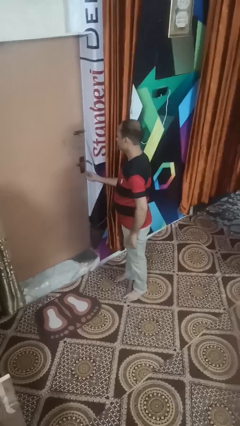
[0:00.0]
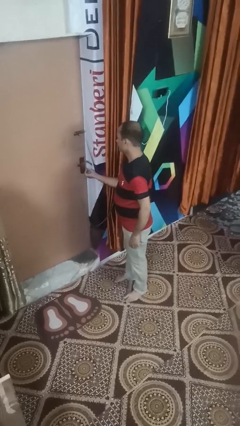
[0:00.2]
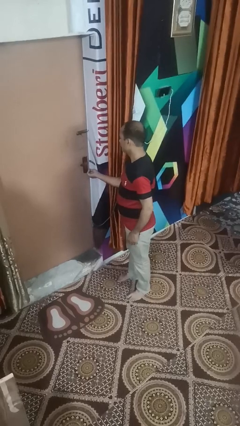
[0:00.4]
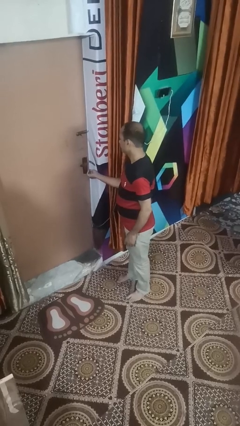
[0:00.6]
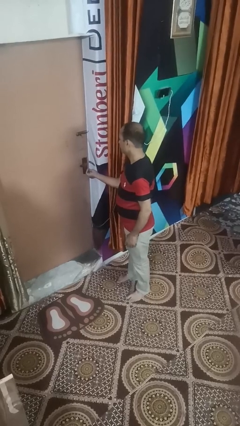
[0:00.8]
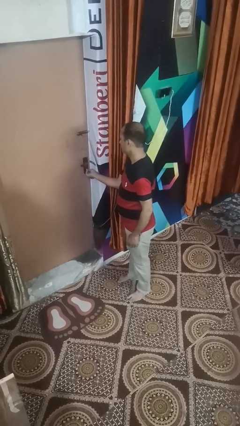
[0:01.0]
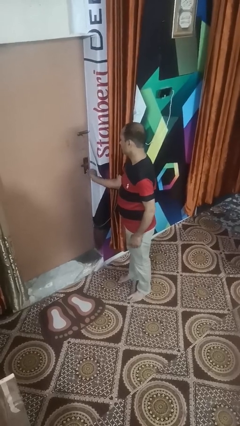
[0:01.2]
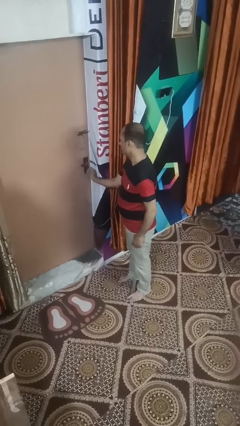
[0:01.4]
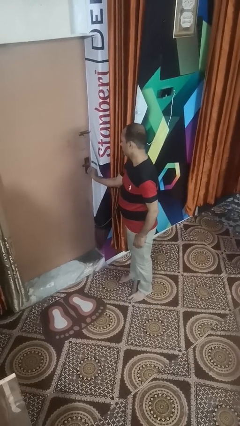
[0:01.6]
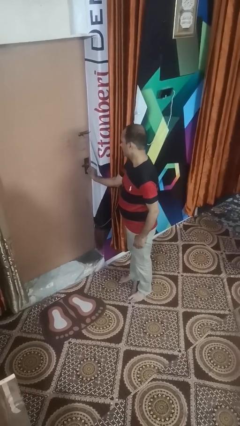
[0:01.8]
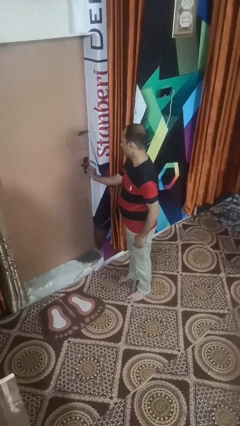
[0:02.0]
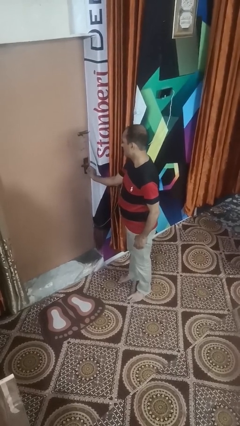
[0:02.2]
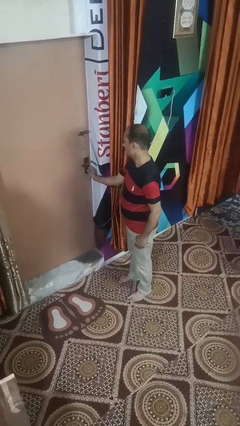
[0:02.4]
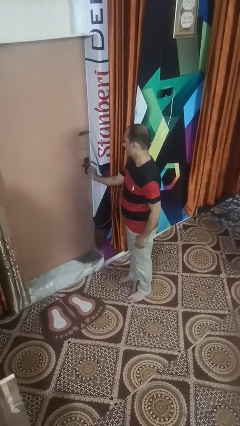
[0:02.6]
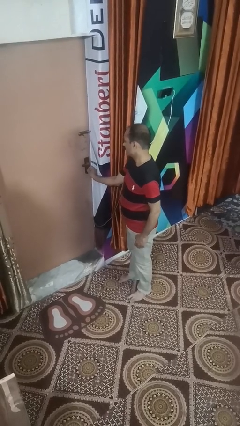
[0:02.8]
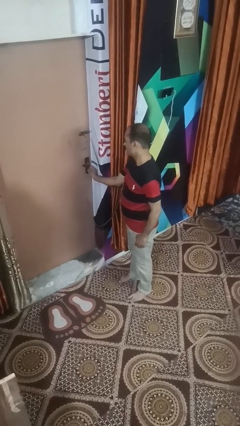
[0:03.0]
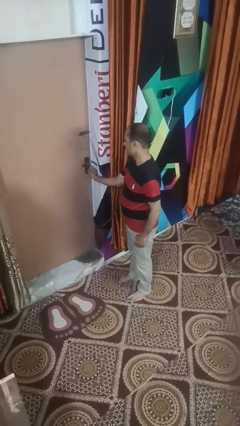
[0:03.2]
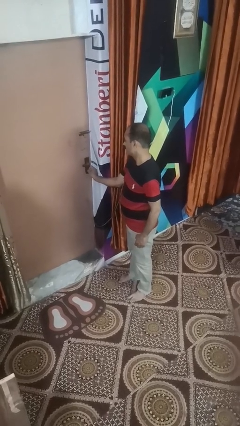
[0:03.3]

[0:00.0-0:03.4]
person locks door with keys

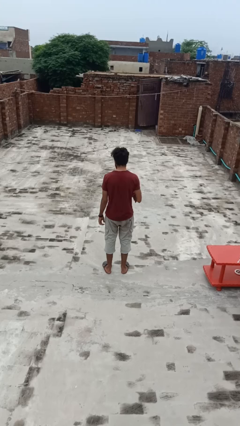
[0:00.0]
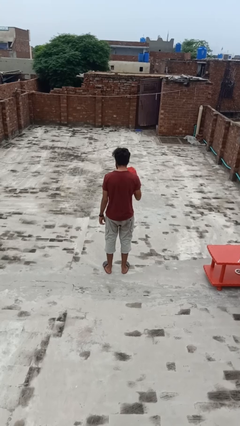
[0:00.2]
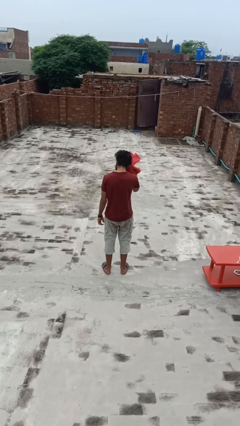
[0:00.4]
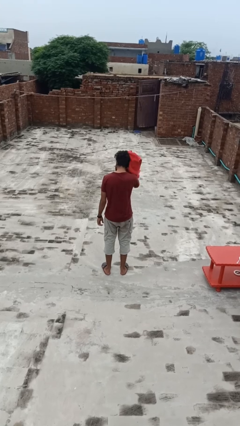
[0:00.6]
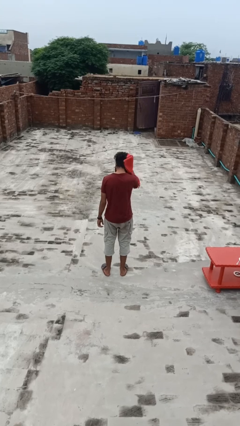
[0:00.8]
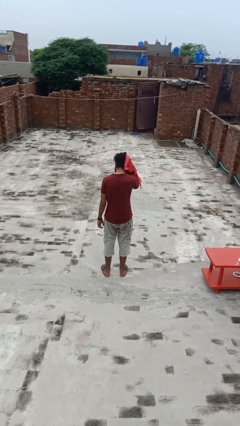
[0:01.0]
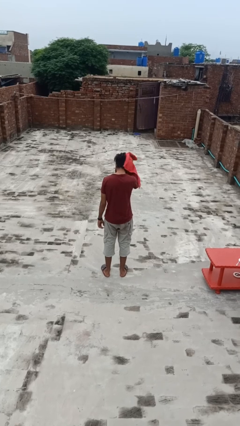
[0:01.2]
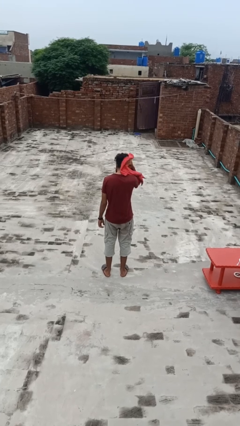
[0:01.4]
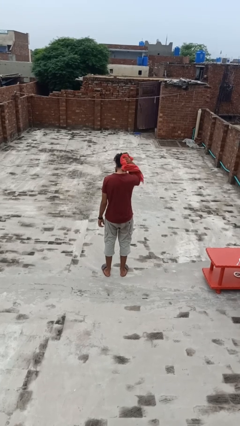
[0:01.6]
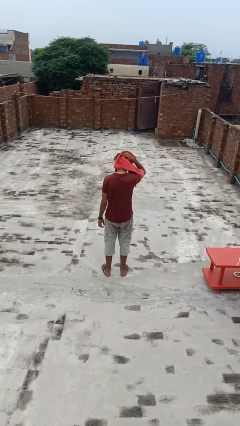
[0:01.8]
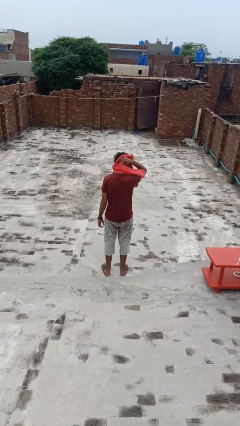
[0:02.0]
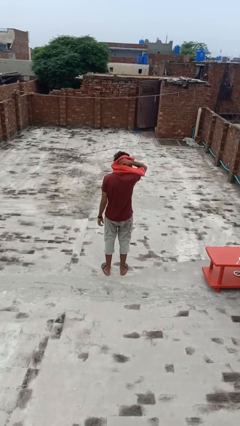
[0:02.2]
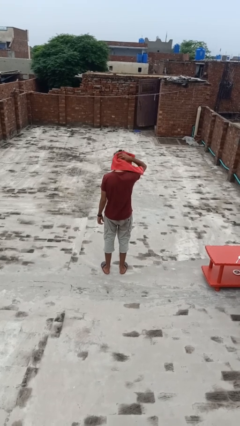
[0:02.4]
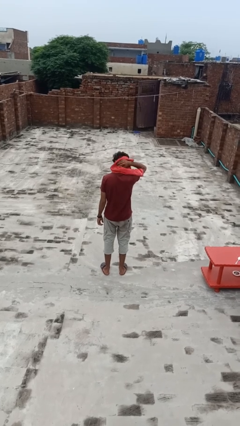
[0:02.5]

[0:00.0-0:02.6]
person dries hair with towel

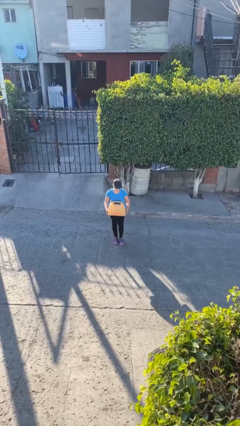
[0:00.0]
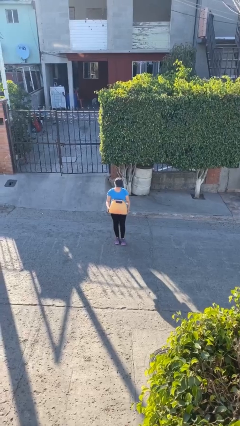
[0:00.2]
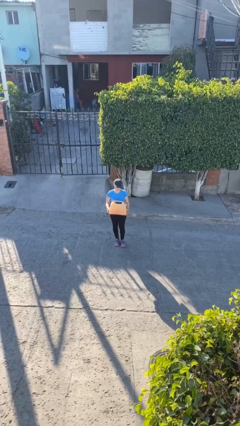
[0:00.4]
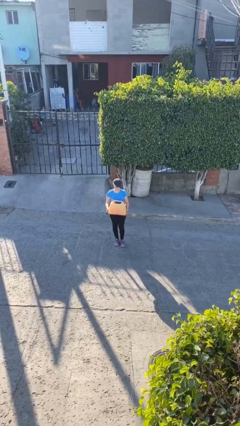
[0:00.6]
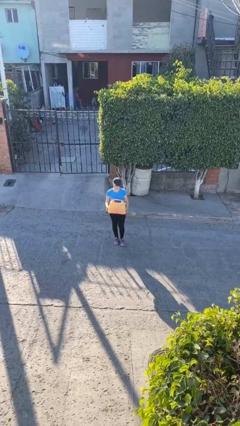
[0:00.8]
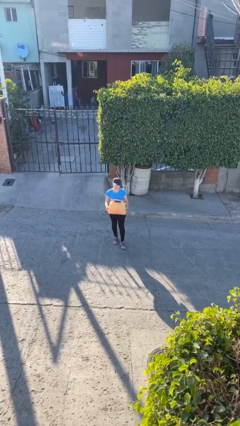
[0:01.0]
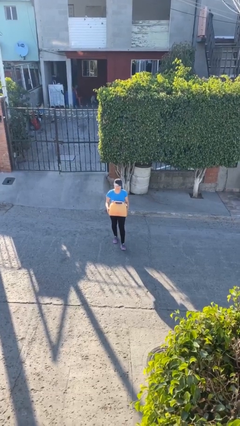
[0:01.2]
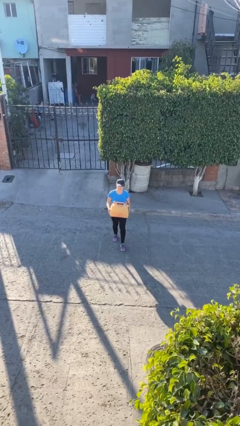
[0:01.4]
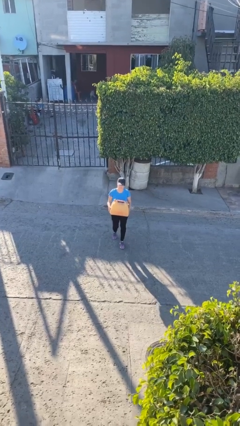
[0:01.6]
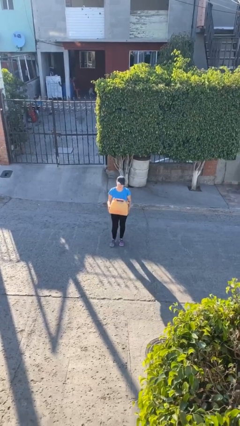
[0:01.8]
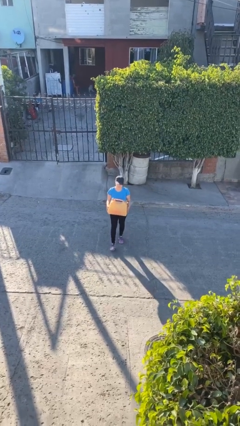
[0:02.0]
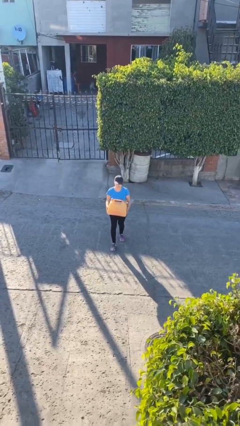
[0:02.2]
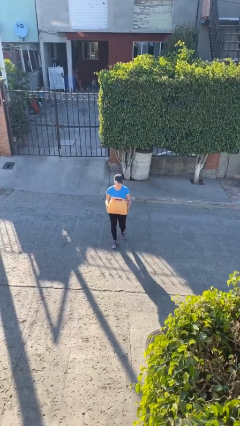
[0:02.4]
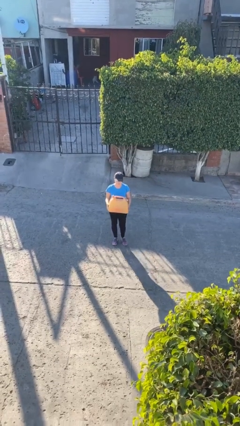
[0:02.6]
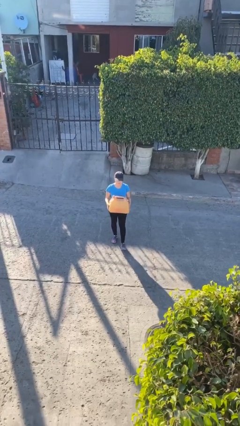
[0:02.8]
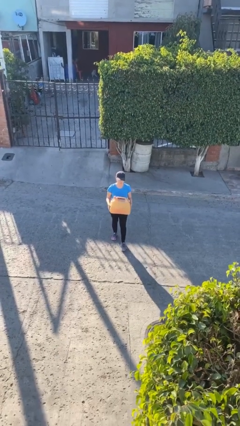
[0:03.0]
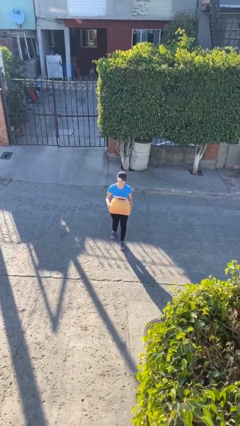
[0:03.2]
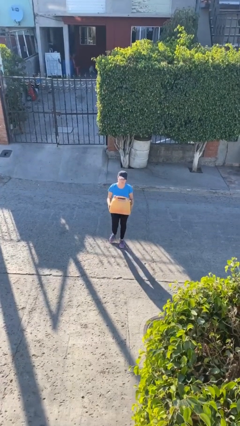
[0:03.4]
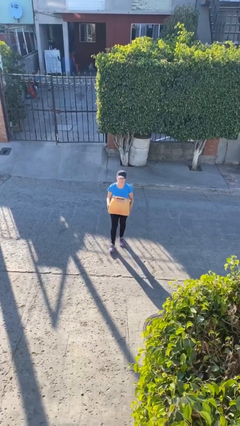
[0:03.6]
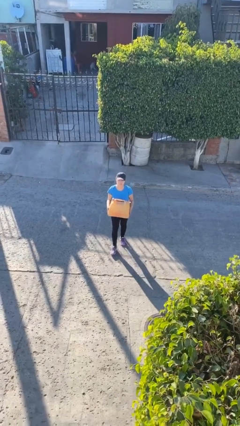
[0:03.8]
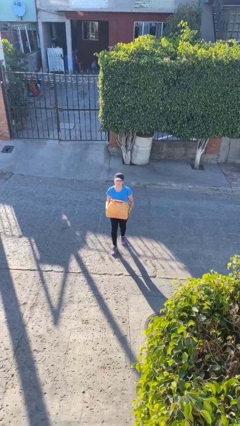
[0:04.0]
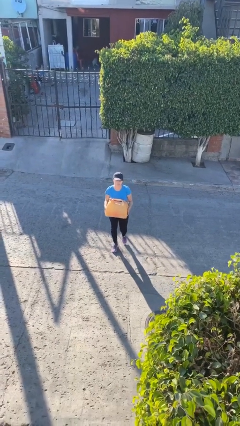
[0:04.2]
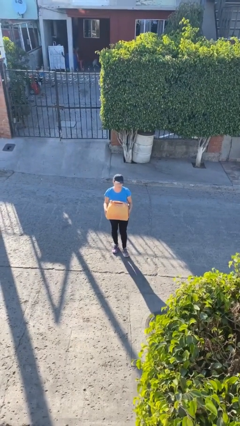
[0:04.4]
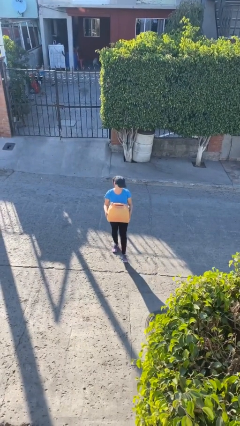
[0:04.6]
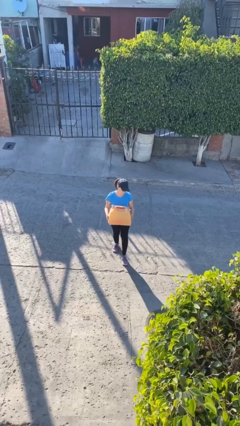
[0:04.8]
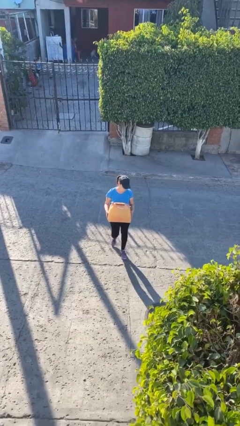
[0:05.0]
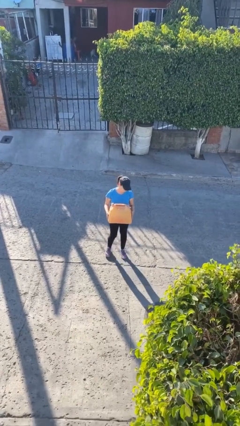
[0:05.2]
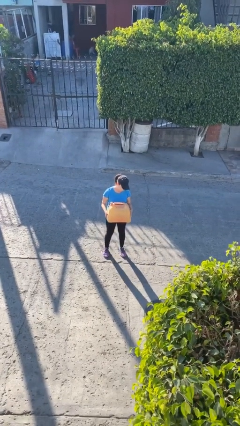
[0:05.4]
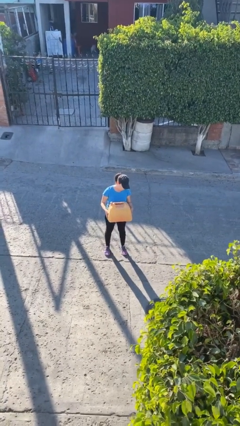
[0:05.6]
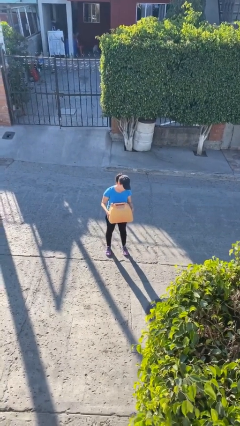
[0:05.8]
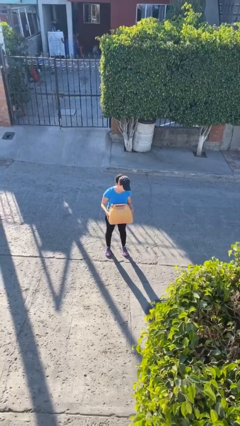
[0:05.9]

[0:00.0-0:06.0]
person carries heavy object

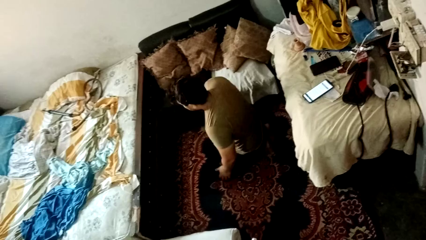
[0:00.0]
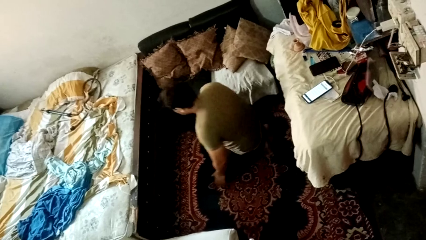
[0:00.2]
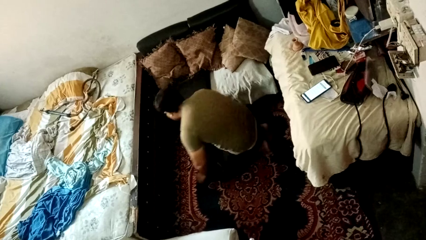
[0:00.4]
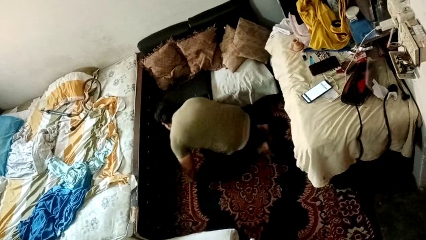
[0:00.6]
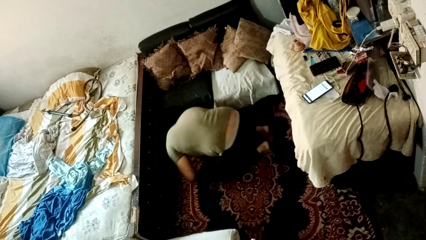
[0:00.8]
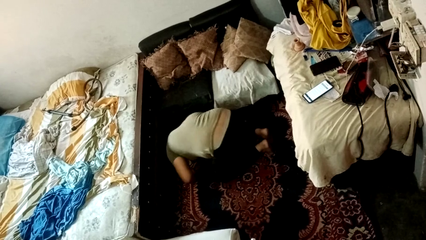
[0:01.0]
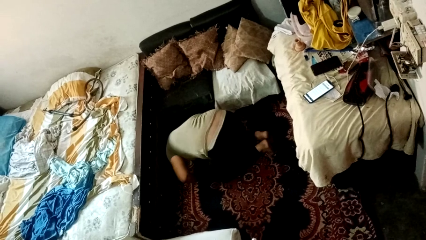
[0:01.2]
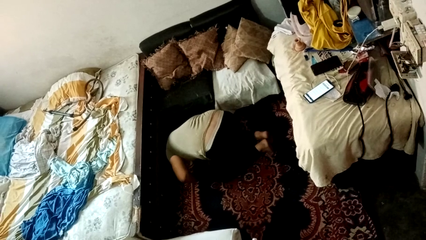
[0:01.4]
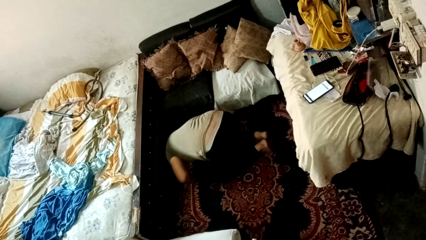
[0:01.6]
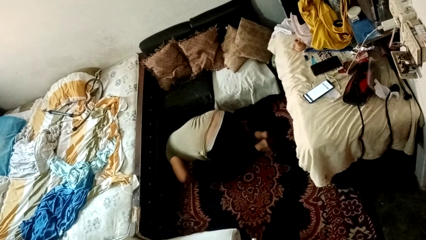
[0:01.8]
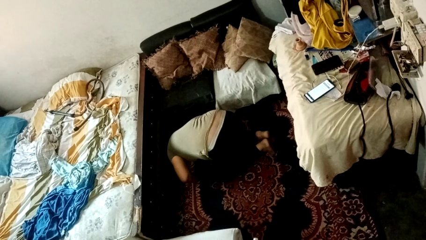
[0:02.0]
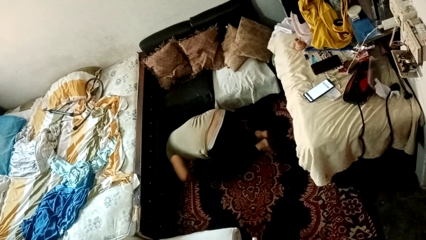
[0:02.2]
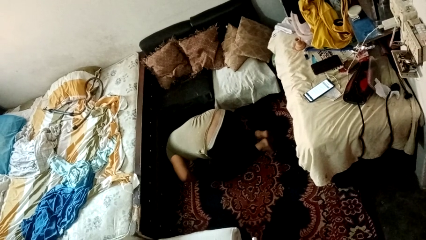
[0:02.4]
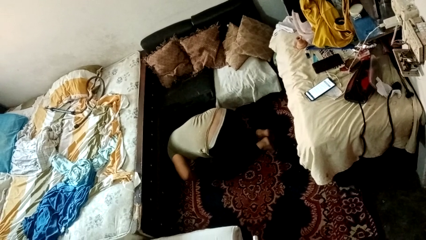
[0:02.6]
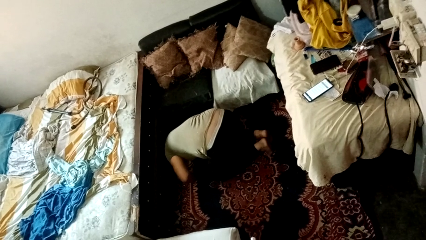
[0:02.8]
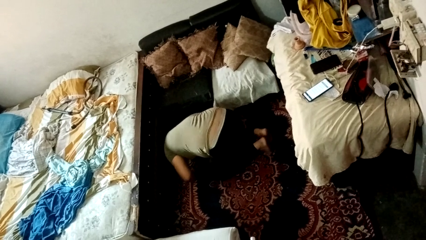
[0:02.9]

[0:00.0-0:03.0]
person searches under bed

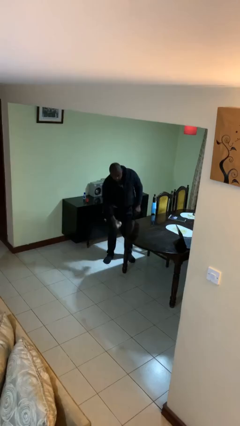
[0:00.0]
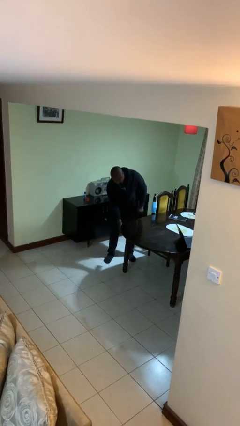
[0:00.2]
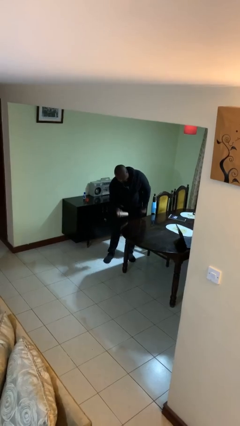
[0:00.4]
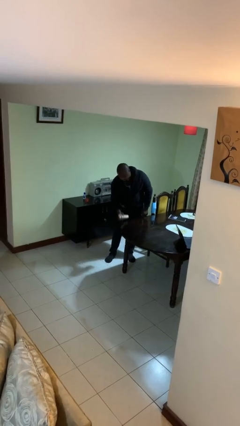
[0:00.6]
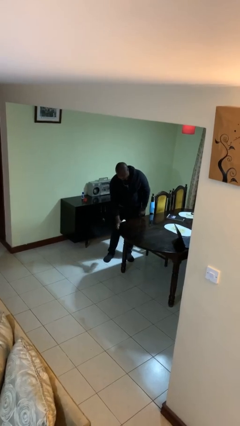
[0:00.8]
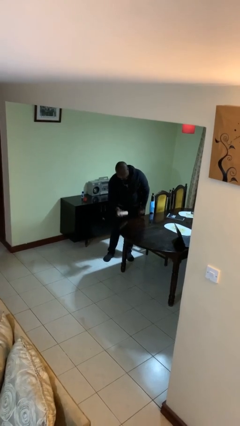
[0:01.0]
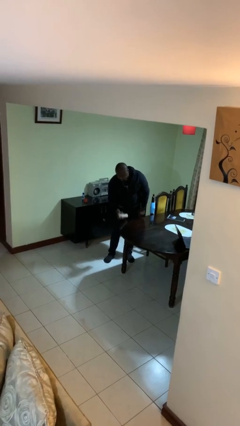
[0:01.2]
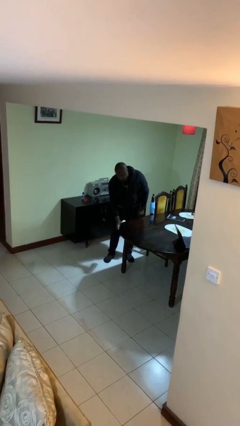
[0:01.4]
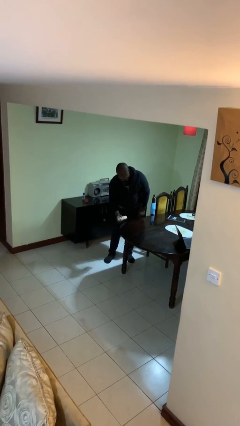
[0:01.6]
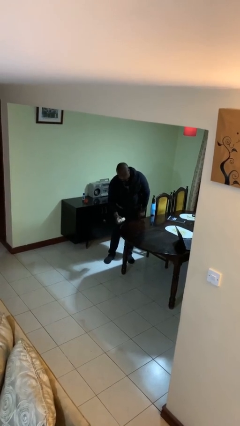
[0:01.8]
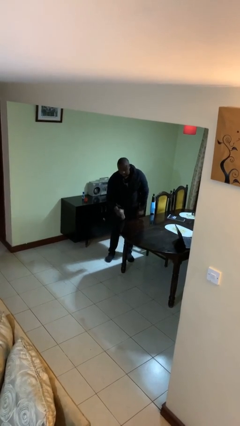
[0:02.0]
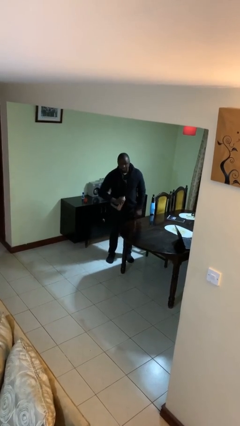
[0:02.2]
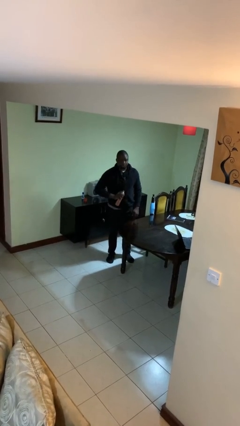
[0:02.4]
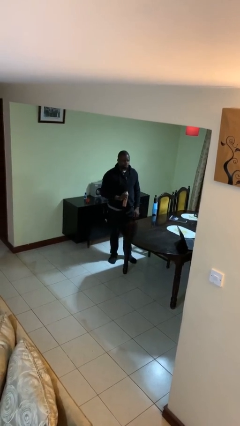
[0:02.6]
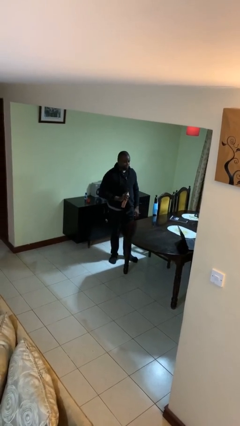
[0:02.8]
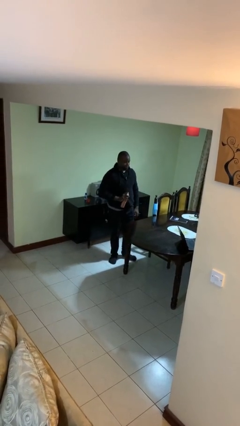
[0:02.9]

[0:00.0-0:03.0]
person sprays from bottle
